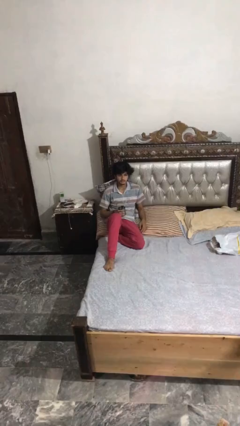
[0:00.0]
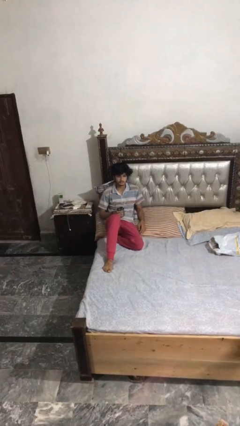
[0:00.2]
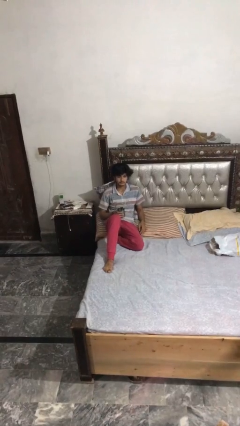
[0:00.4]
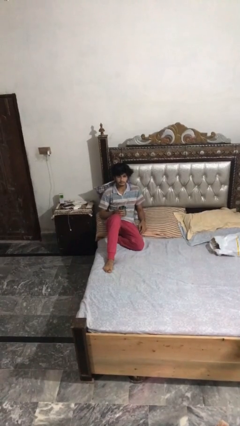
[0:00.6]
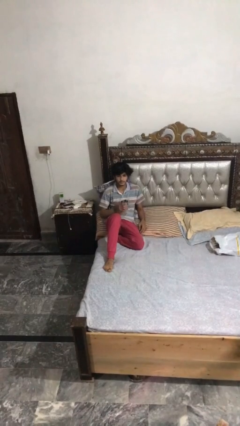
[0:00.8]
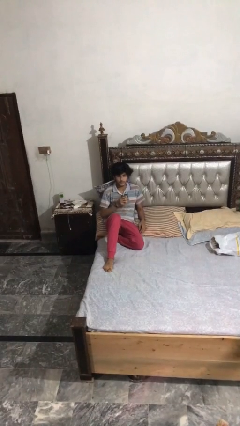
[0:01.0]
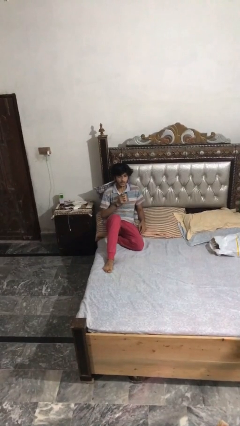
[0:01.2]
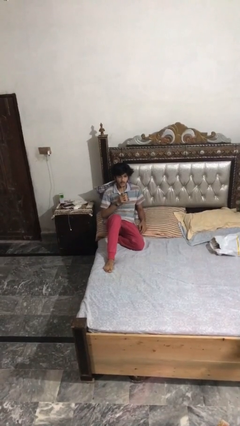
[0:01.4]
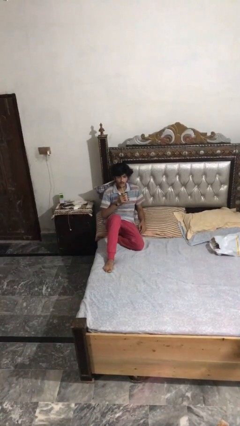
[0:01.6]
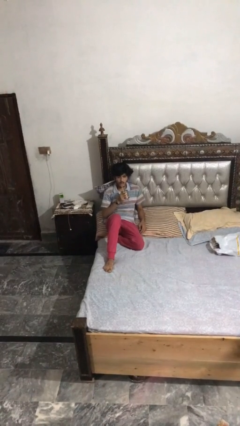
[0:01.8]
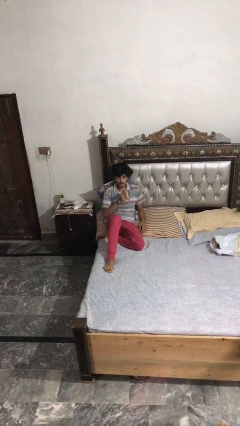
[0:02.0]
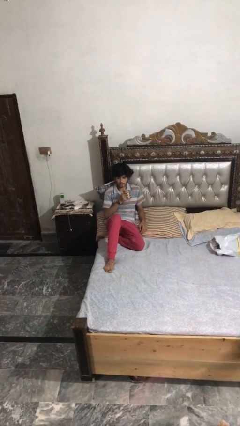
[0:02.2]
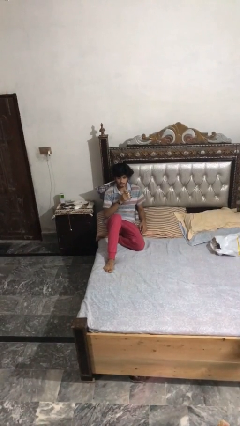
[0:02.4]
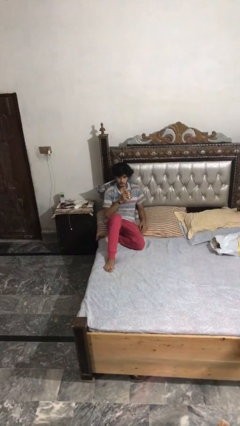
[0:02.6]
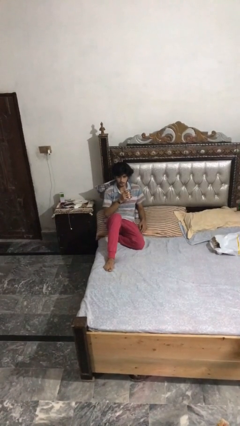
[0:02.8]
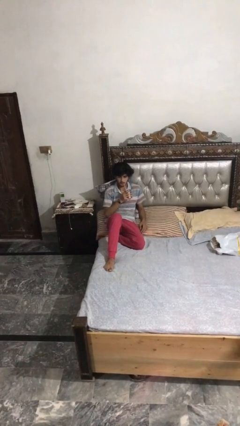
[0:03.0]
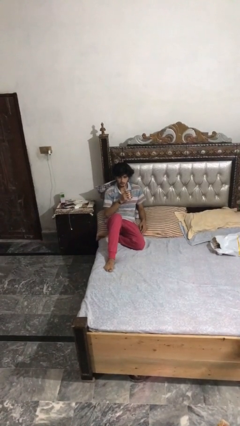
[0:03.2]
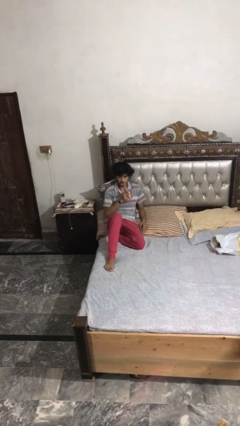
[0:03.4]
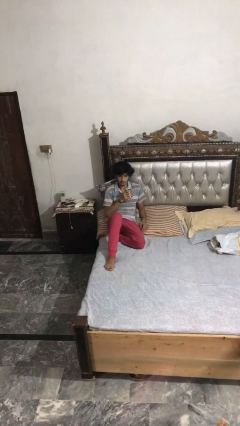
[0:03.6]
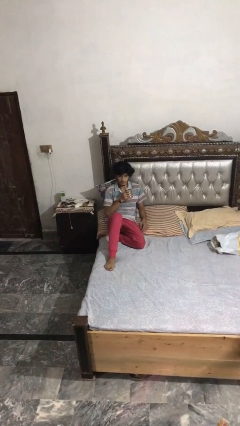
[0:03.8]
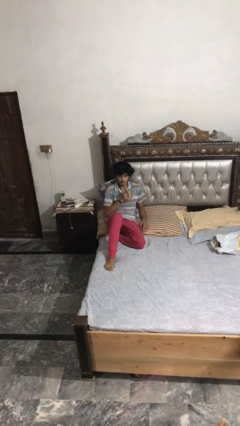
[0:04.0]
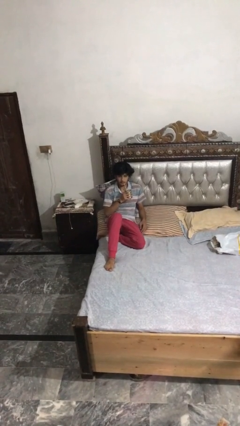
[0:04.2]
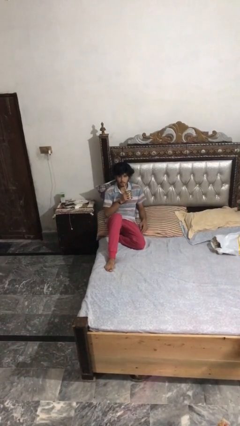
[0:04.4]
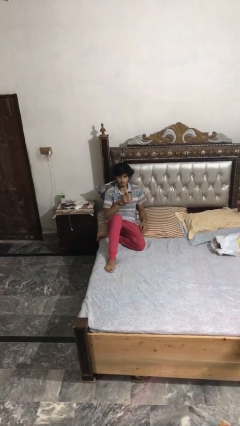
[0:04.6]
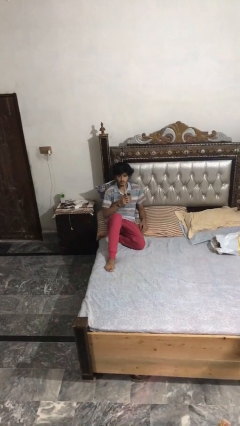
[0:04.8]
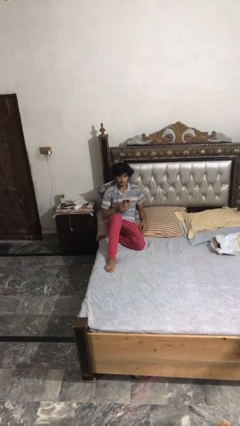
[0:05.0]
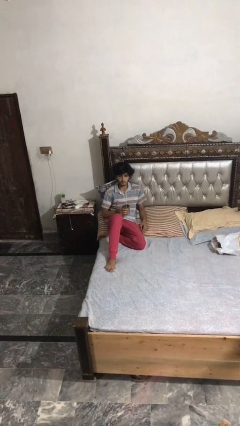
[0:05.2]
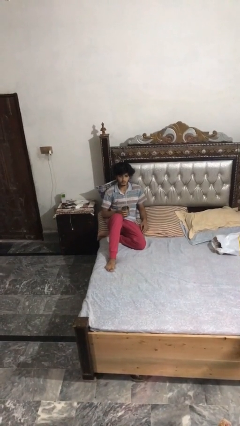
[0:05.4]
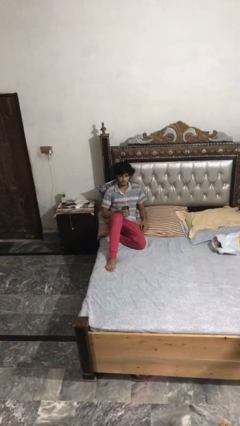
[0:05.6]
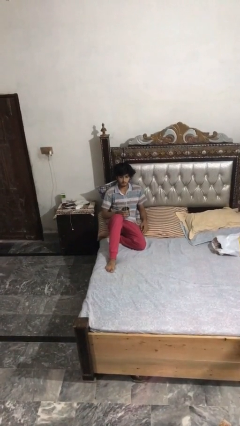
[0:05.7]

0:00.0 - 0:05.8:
person drinks from straw

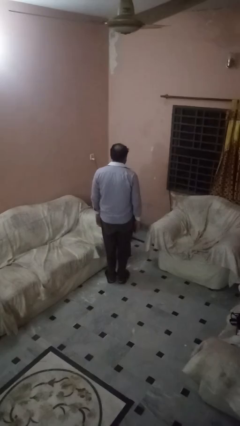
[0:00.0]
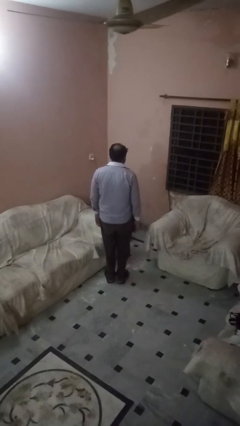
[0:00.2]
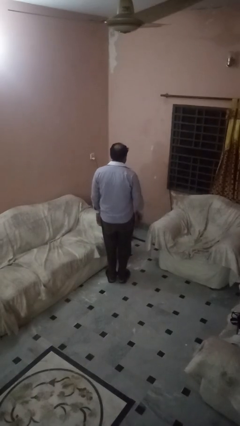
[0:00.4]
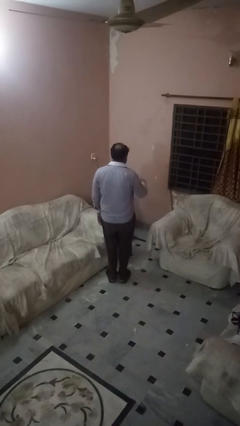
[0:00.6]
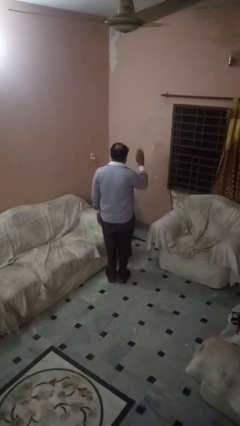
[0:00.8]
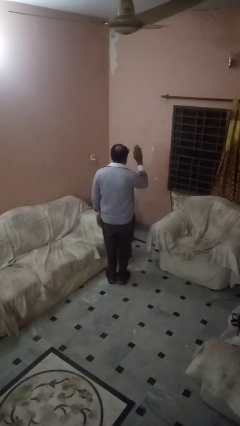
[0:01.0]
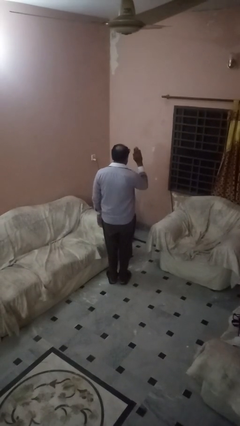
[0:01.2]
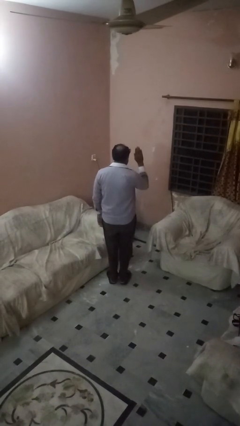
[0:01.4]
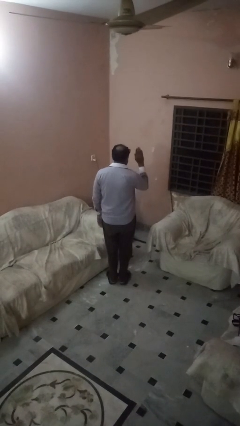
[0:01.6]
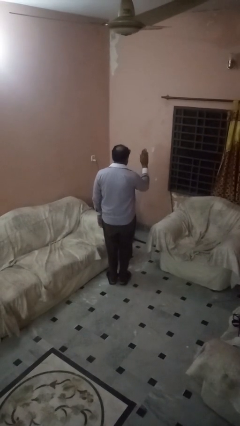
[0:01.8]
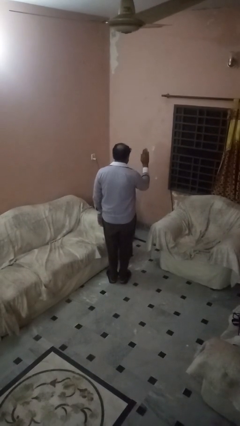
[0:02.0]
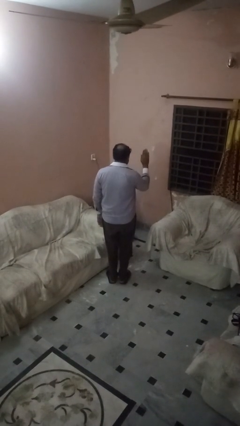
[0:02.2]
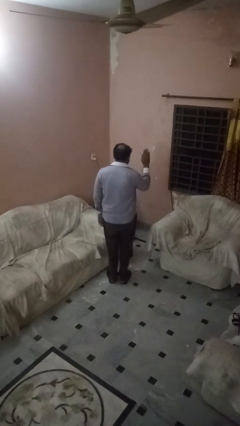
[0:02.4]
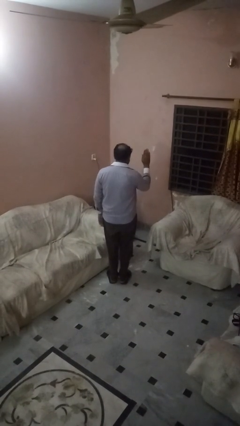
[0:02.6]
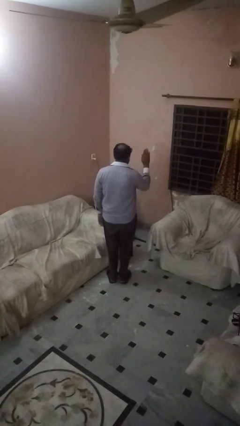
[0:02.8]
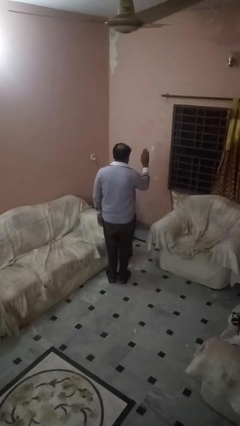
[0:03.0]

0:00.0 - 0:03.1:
person gestures stop

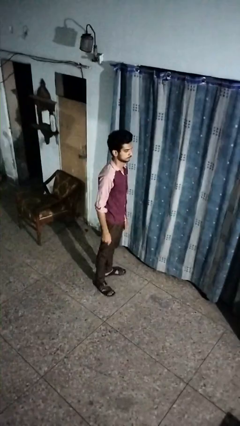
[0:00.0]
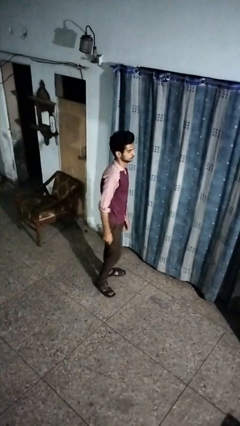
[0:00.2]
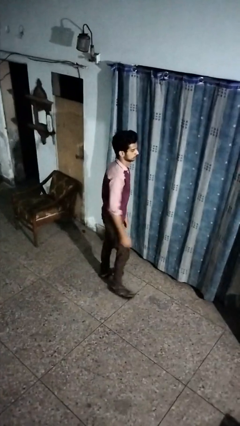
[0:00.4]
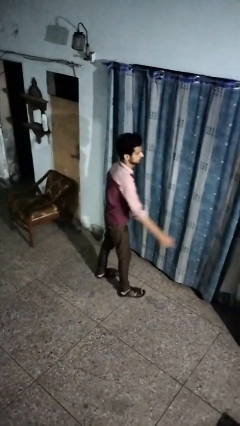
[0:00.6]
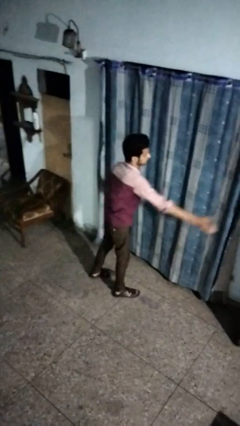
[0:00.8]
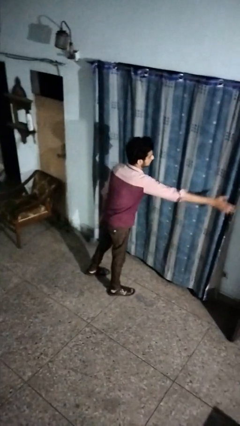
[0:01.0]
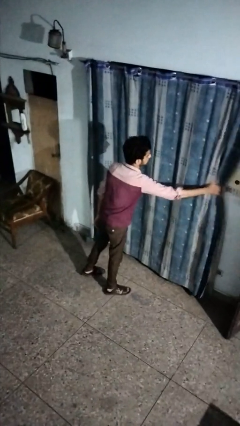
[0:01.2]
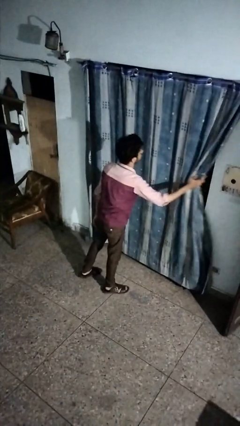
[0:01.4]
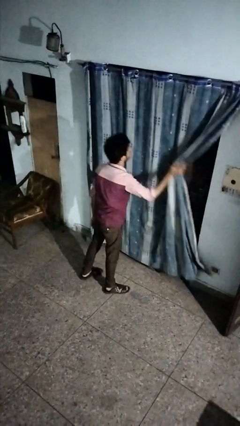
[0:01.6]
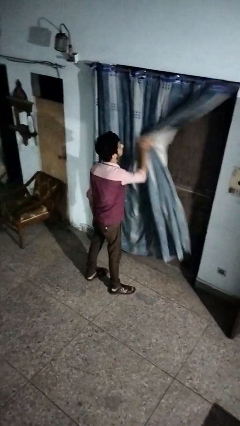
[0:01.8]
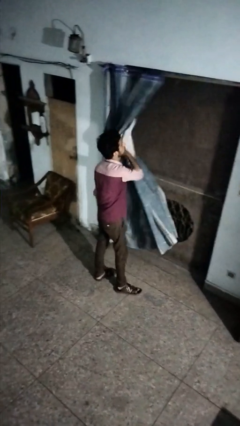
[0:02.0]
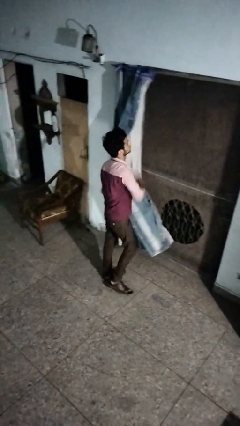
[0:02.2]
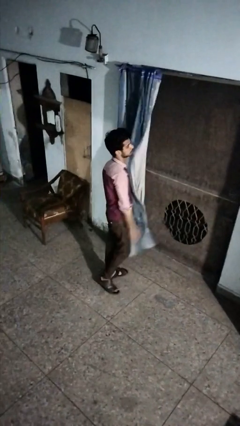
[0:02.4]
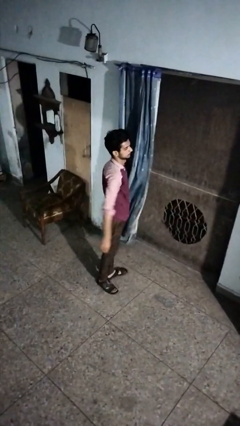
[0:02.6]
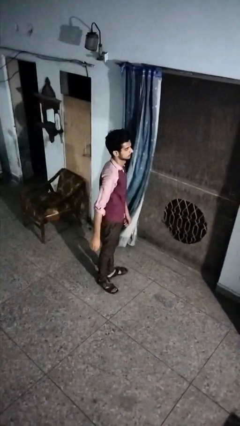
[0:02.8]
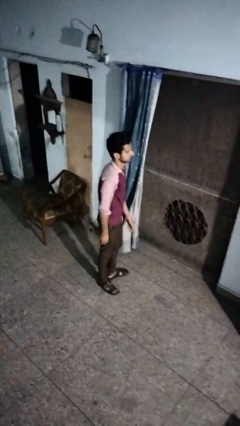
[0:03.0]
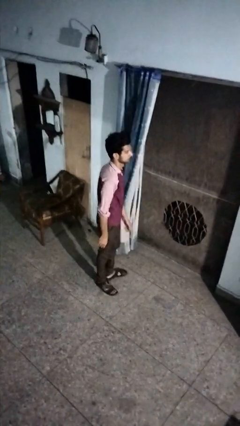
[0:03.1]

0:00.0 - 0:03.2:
person opens curtains

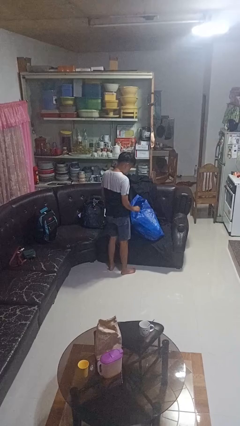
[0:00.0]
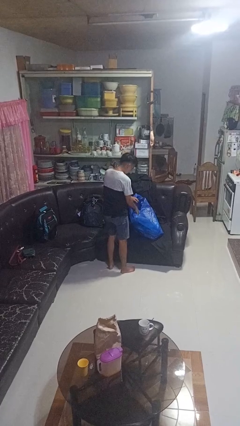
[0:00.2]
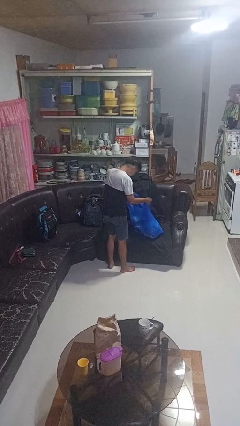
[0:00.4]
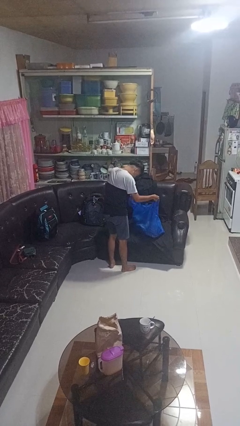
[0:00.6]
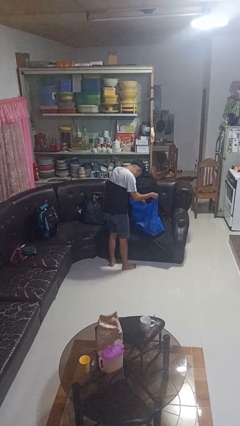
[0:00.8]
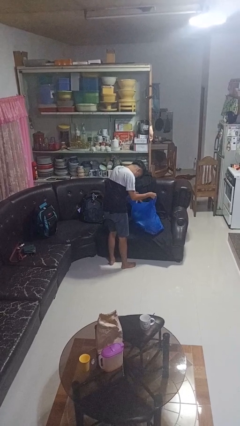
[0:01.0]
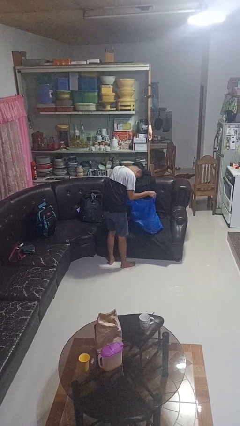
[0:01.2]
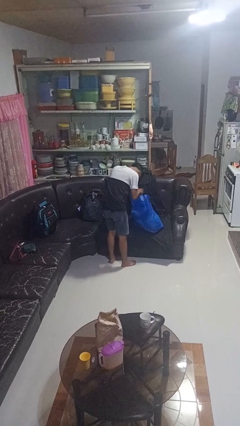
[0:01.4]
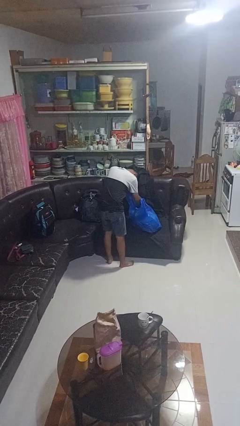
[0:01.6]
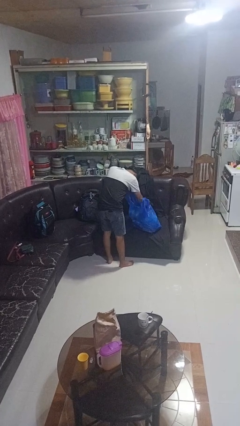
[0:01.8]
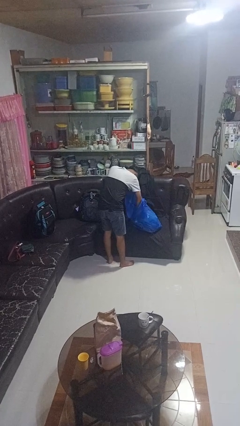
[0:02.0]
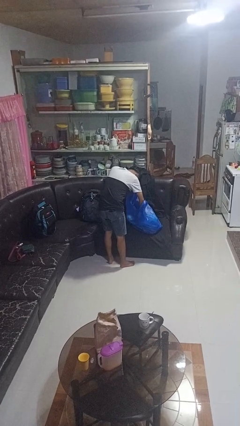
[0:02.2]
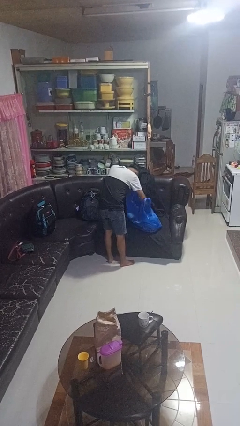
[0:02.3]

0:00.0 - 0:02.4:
person searches in bag

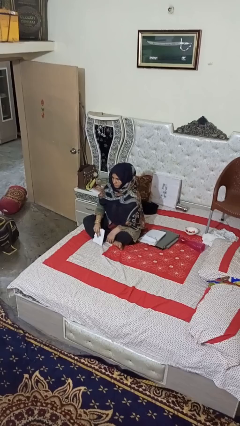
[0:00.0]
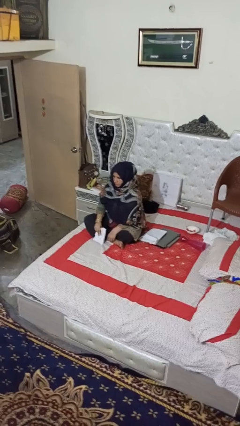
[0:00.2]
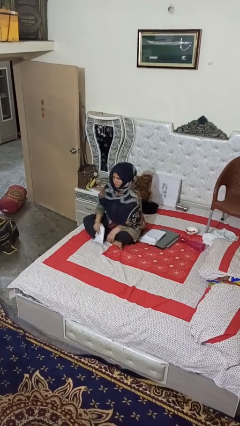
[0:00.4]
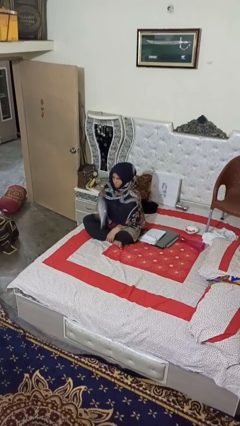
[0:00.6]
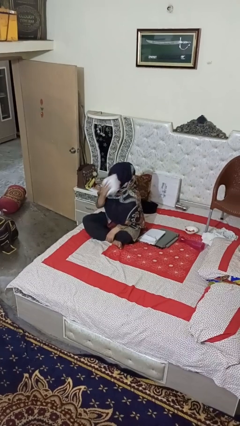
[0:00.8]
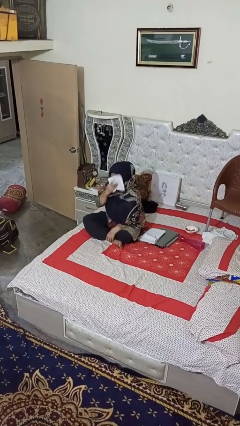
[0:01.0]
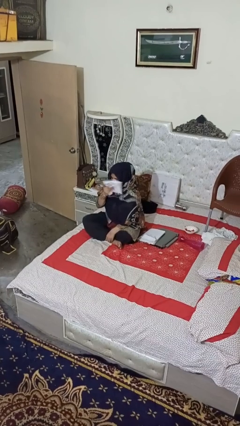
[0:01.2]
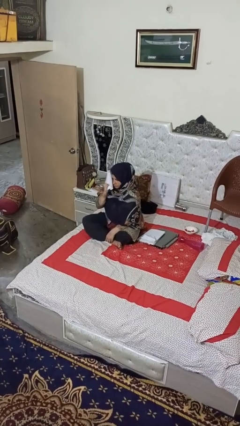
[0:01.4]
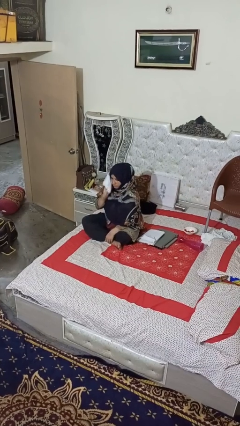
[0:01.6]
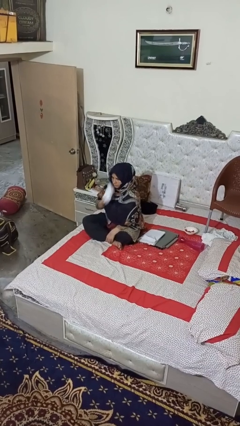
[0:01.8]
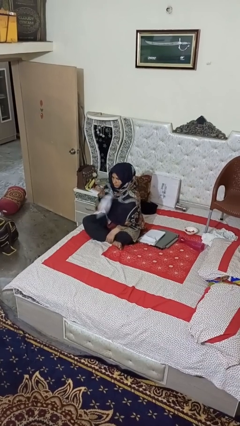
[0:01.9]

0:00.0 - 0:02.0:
person wipes mouth with napkin

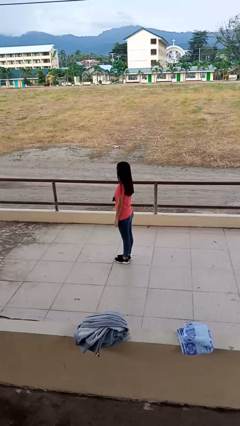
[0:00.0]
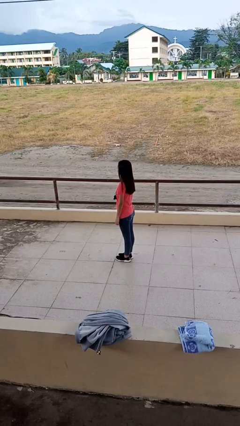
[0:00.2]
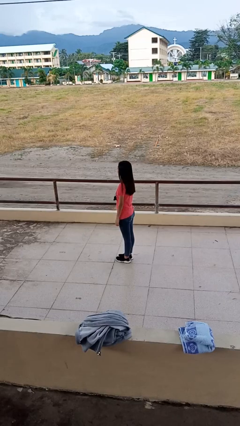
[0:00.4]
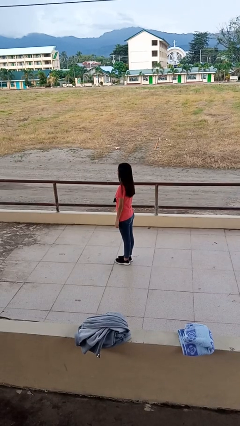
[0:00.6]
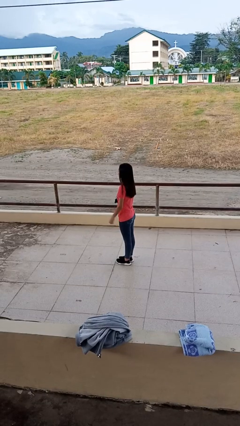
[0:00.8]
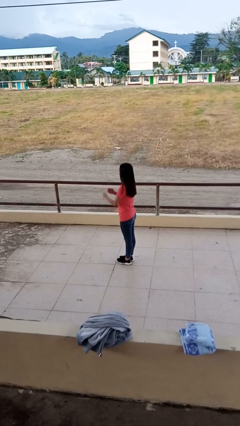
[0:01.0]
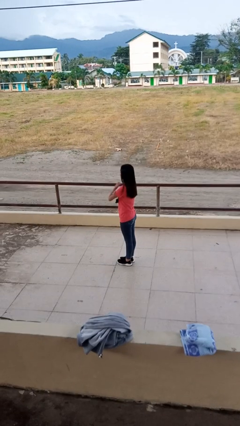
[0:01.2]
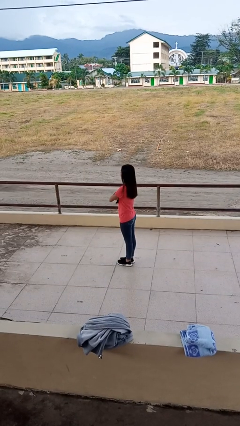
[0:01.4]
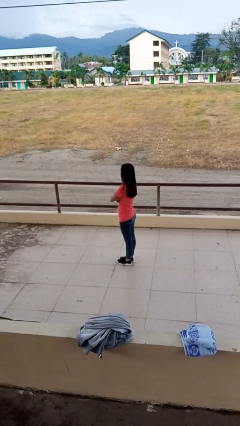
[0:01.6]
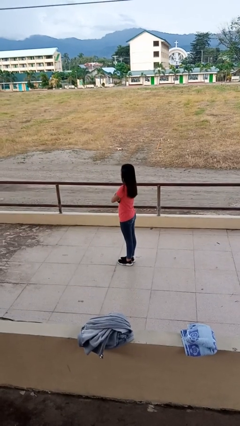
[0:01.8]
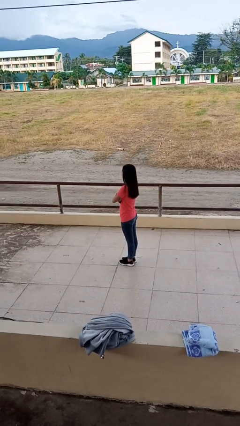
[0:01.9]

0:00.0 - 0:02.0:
person crosses arms
